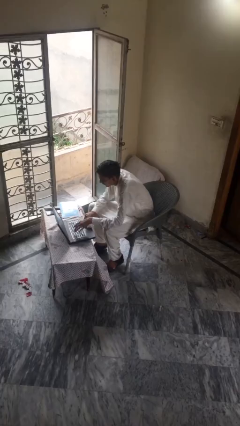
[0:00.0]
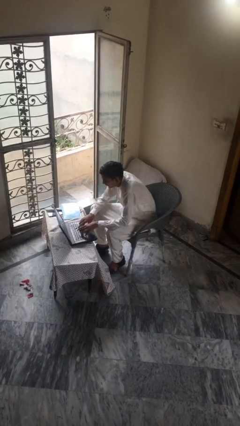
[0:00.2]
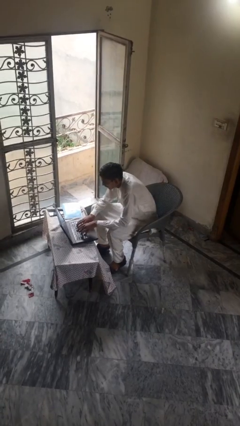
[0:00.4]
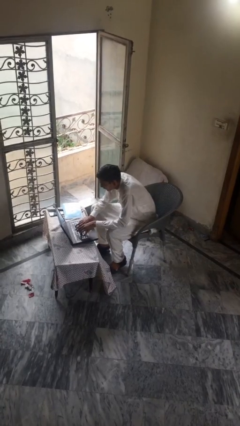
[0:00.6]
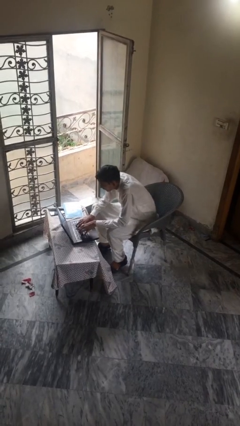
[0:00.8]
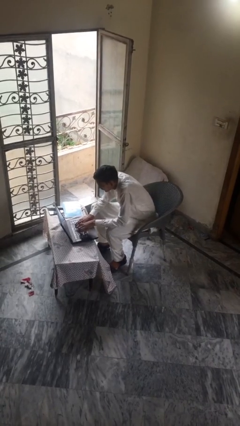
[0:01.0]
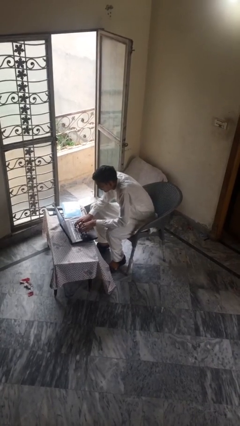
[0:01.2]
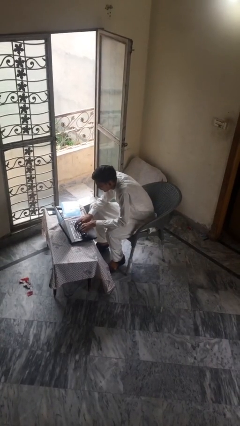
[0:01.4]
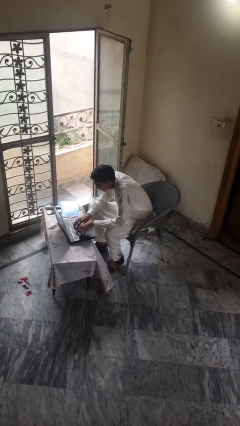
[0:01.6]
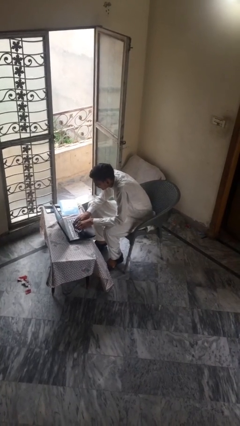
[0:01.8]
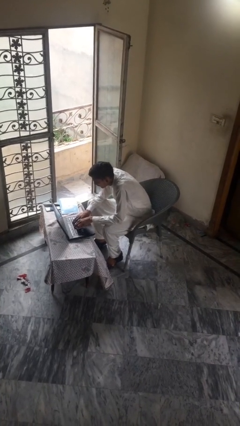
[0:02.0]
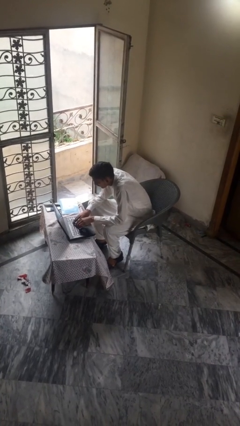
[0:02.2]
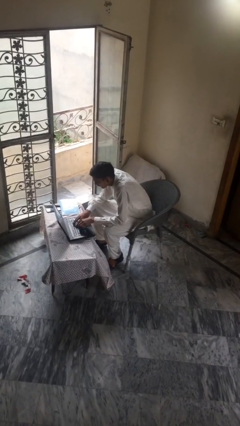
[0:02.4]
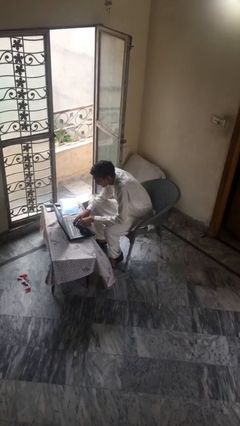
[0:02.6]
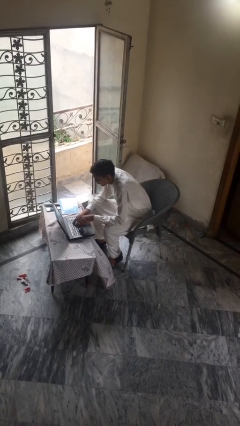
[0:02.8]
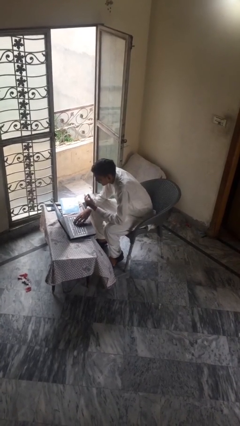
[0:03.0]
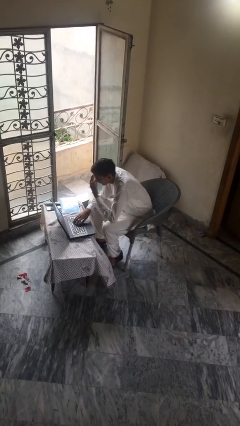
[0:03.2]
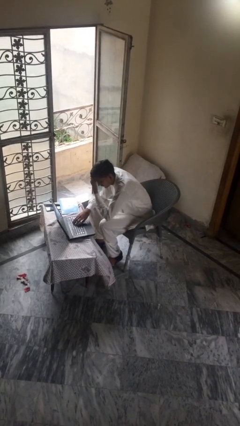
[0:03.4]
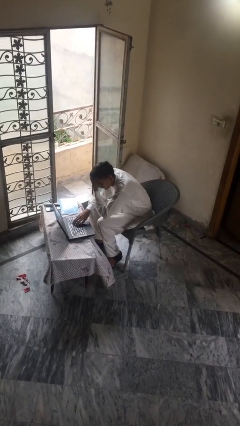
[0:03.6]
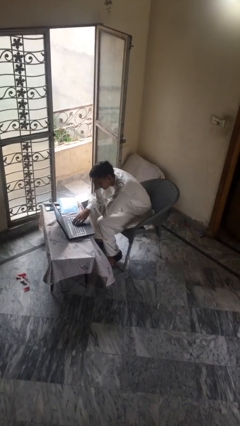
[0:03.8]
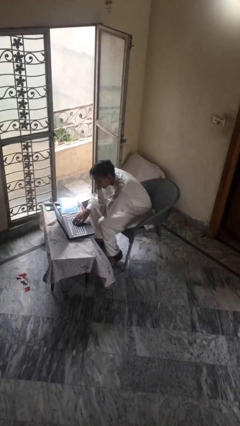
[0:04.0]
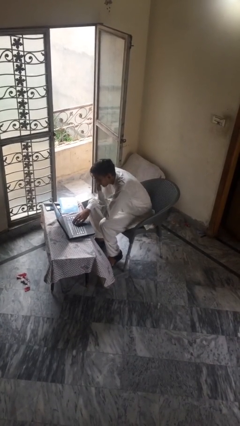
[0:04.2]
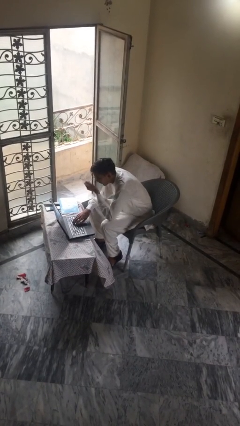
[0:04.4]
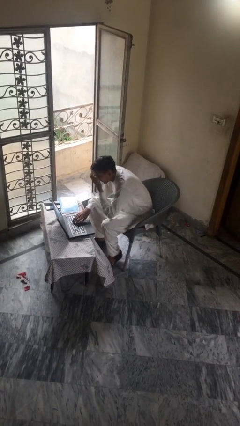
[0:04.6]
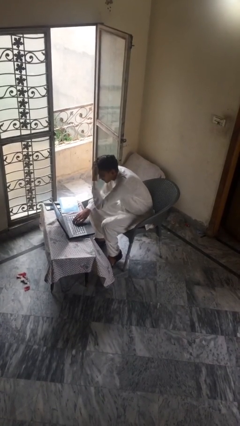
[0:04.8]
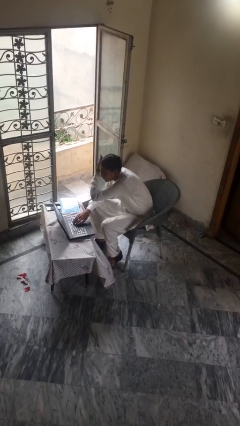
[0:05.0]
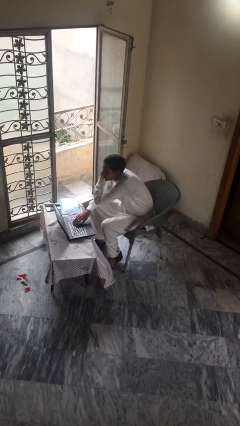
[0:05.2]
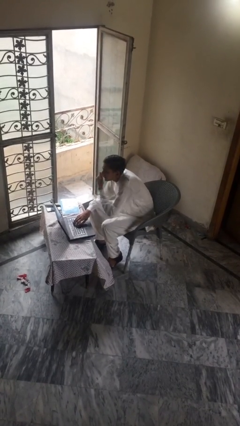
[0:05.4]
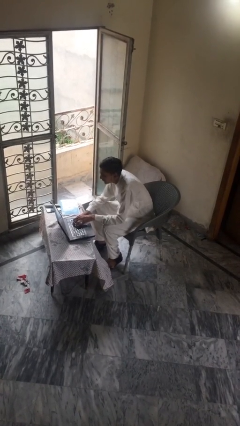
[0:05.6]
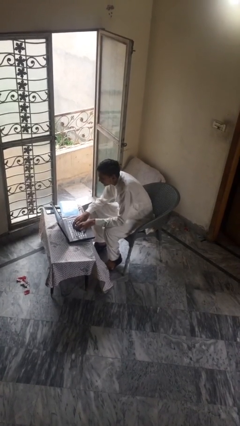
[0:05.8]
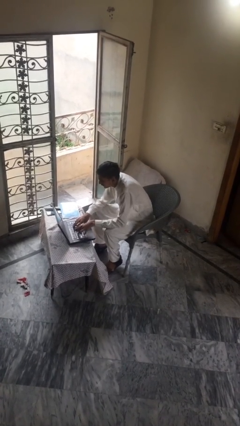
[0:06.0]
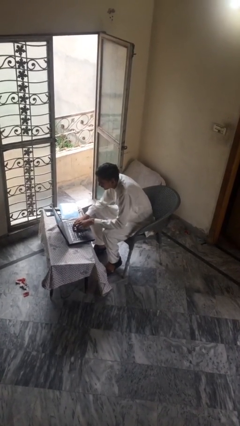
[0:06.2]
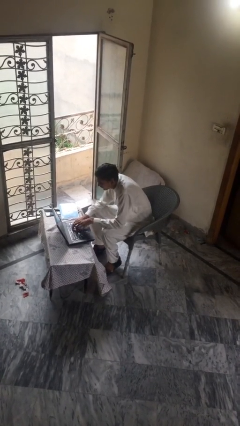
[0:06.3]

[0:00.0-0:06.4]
person interacts with laptop

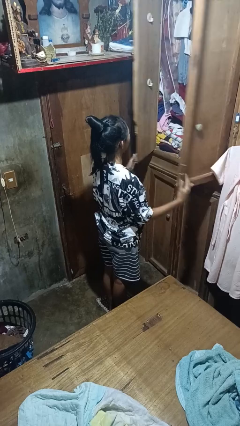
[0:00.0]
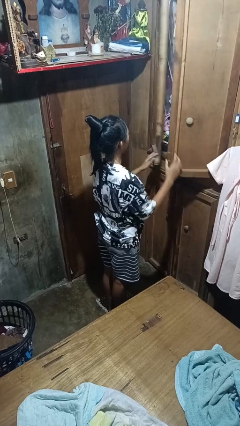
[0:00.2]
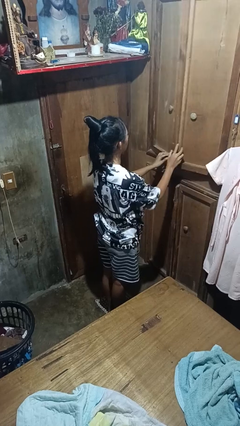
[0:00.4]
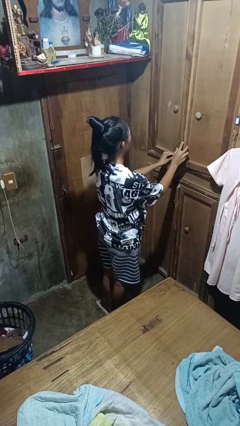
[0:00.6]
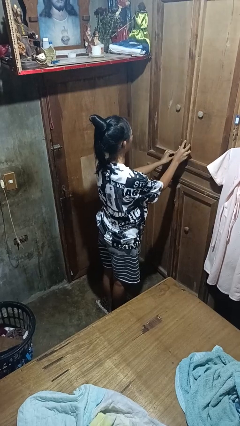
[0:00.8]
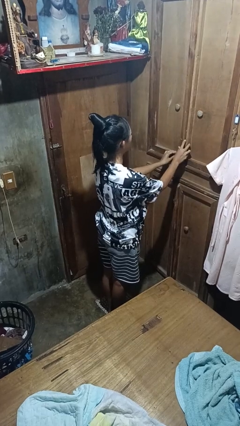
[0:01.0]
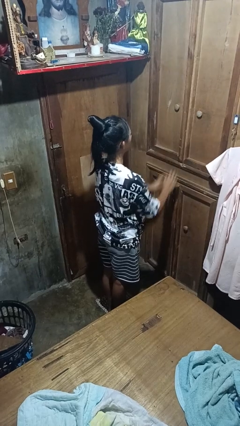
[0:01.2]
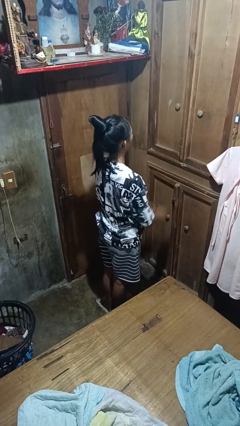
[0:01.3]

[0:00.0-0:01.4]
person closes closet door

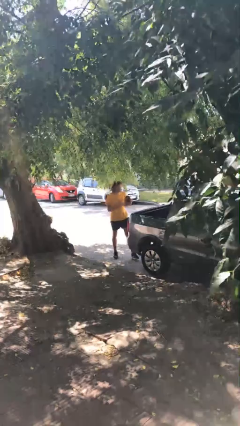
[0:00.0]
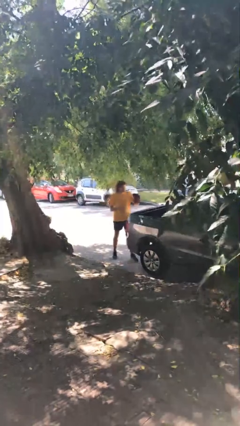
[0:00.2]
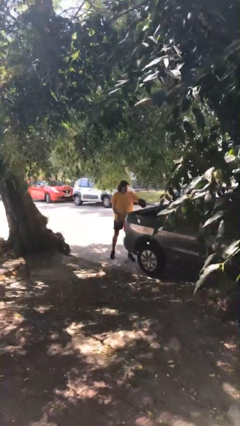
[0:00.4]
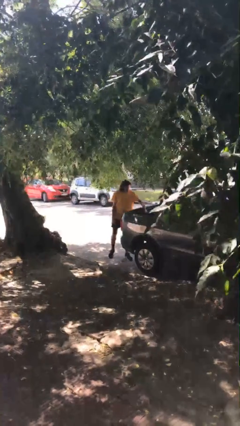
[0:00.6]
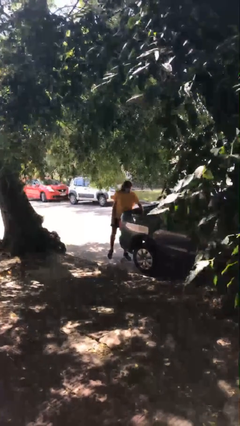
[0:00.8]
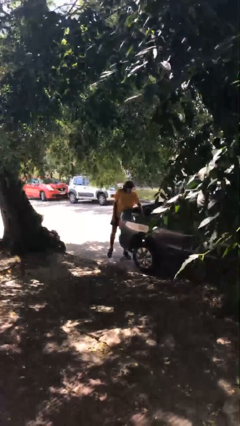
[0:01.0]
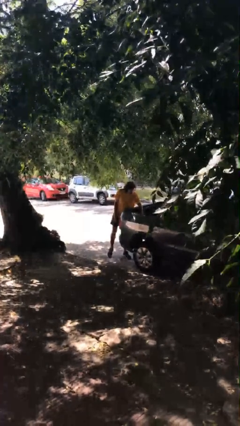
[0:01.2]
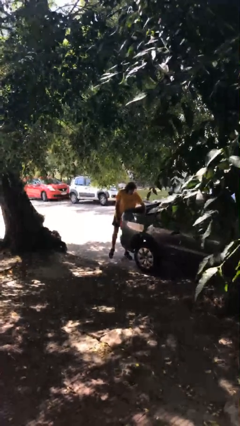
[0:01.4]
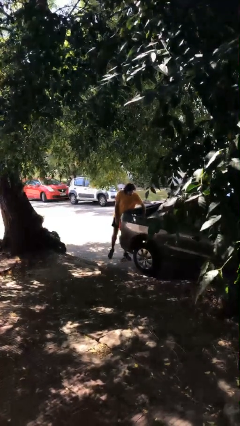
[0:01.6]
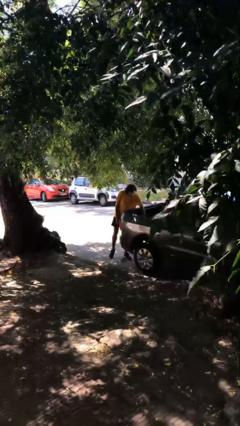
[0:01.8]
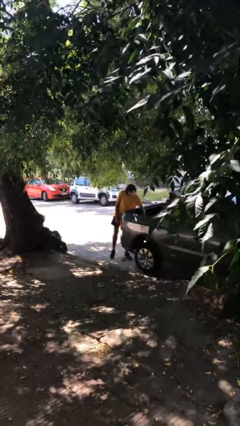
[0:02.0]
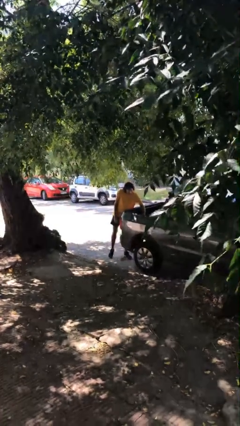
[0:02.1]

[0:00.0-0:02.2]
person loads car

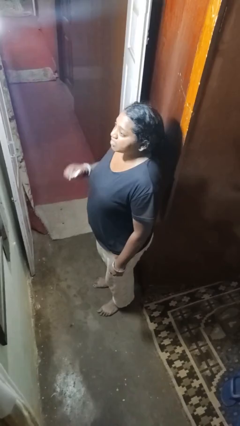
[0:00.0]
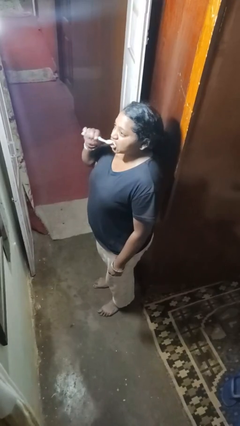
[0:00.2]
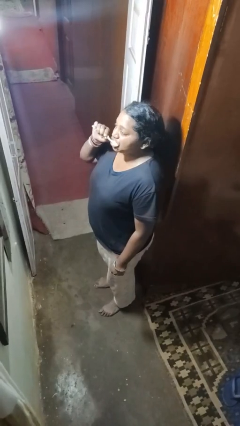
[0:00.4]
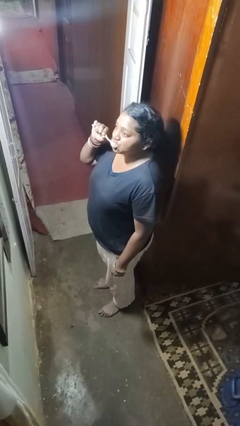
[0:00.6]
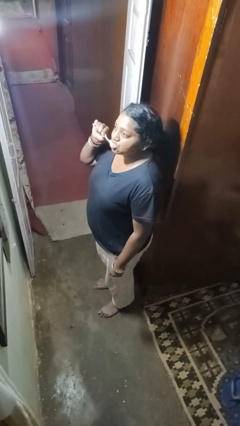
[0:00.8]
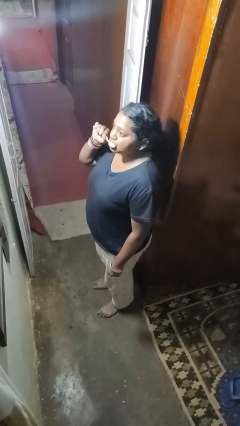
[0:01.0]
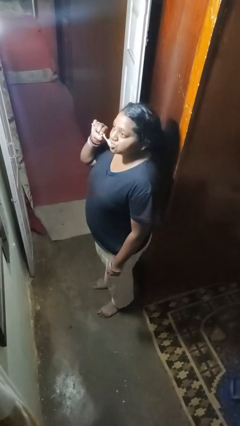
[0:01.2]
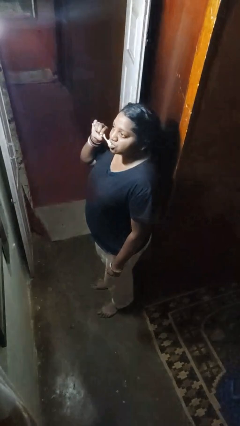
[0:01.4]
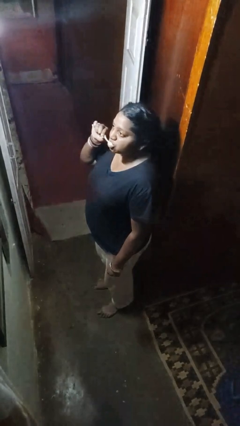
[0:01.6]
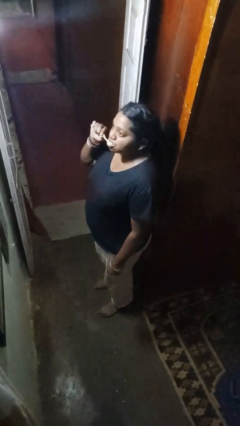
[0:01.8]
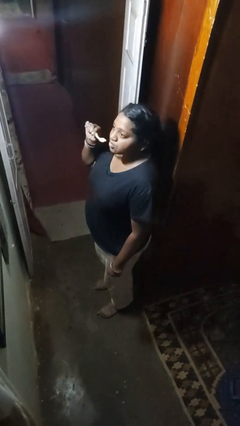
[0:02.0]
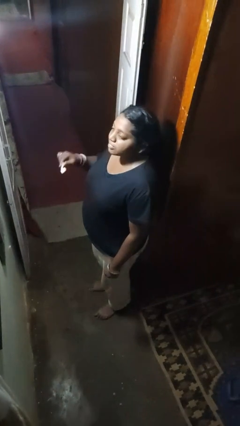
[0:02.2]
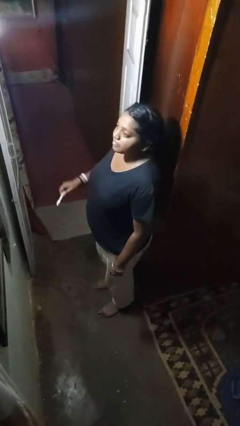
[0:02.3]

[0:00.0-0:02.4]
person brushes teeth

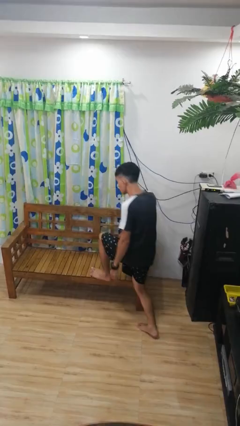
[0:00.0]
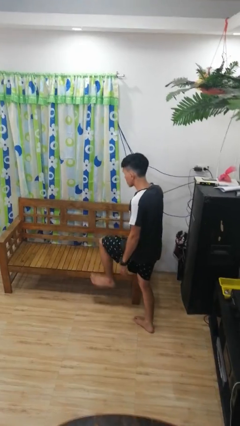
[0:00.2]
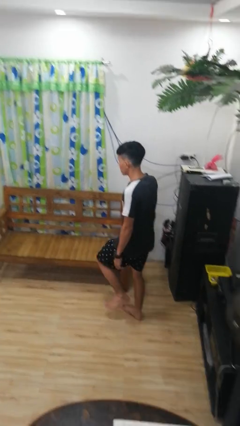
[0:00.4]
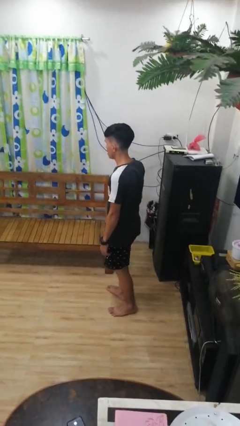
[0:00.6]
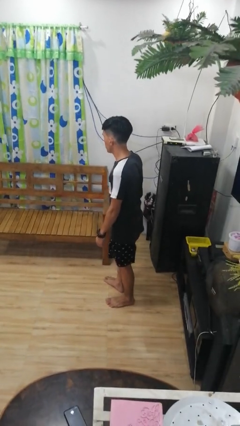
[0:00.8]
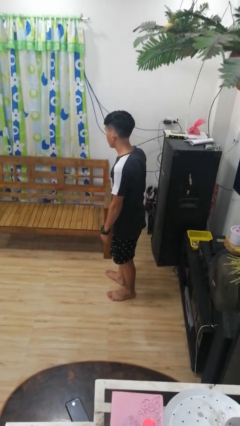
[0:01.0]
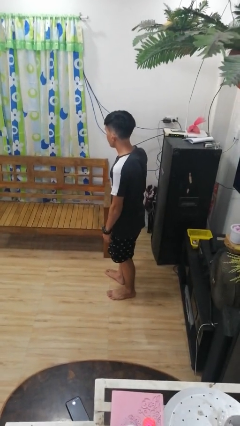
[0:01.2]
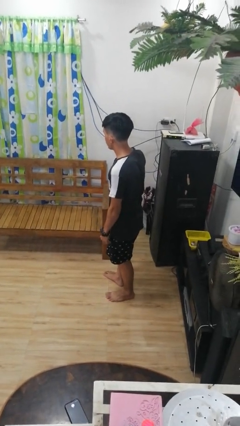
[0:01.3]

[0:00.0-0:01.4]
person climbs off couch

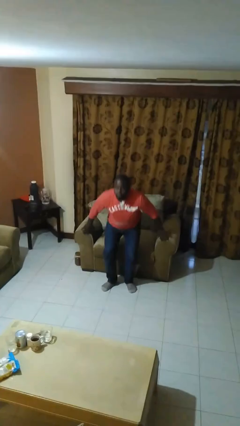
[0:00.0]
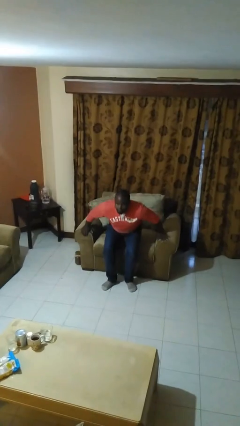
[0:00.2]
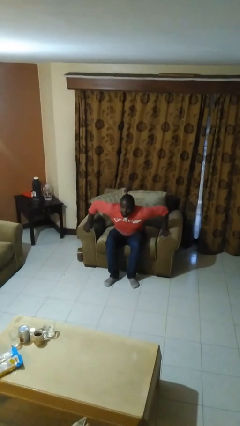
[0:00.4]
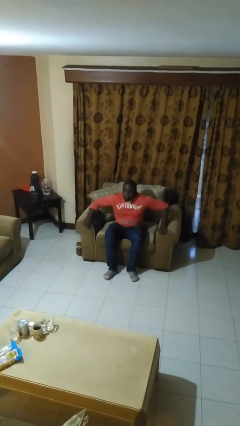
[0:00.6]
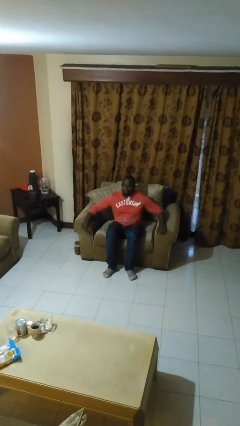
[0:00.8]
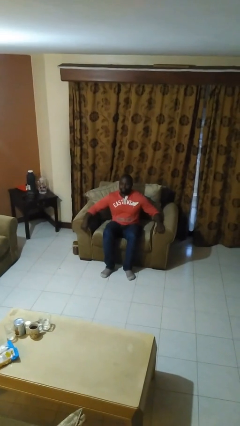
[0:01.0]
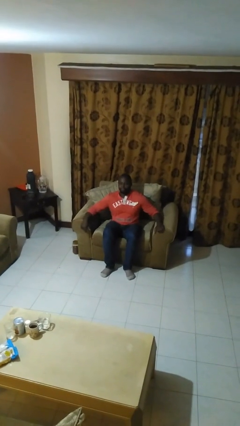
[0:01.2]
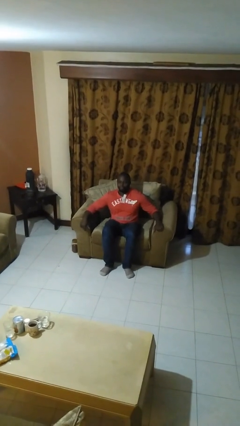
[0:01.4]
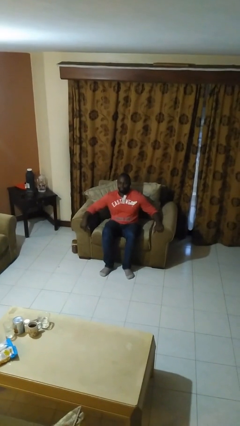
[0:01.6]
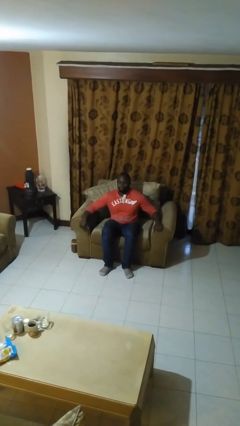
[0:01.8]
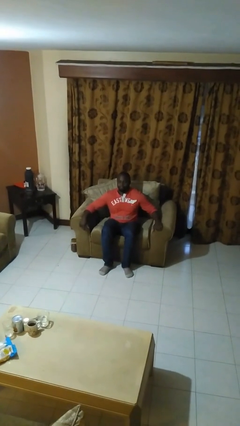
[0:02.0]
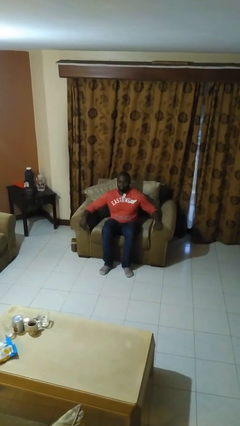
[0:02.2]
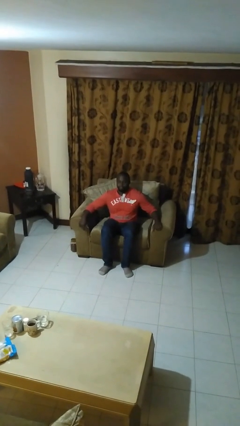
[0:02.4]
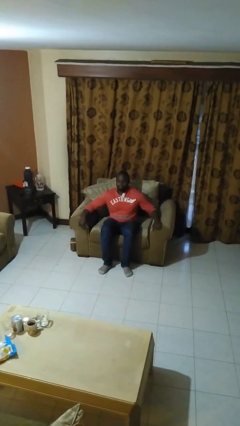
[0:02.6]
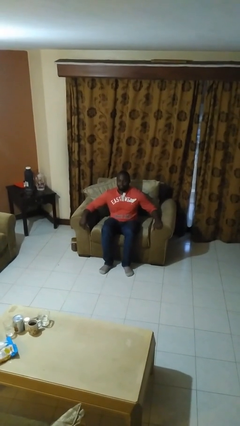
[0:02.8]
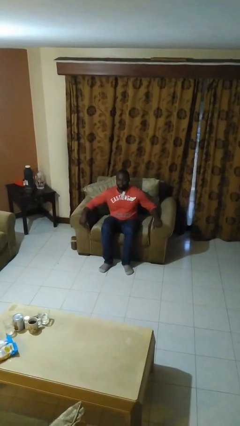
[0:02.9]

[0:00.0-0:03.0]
person sits down

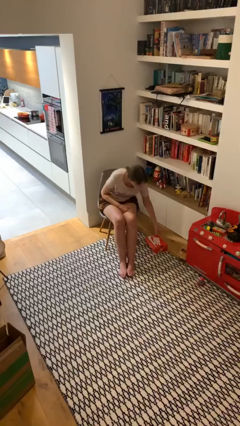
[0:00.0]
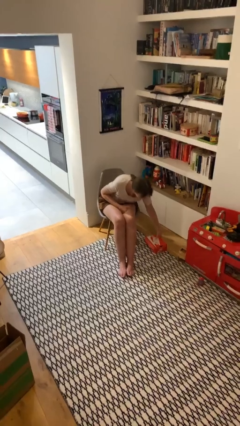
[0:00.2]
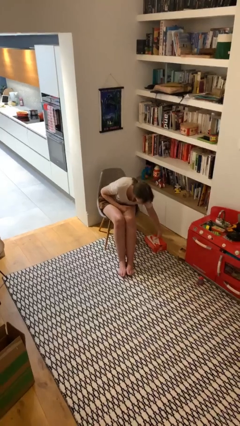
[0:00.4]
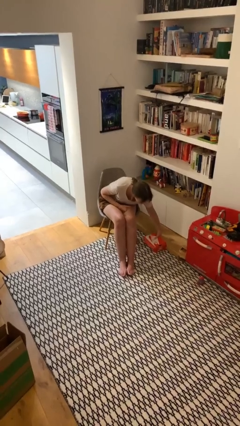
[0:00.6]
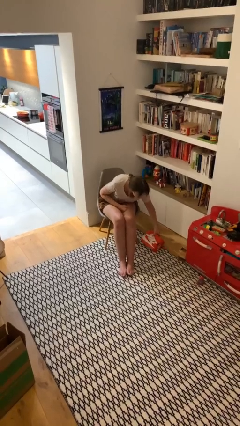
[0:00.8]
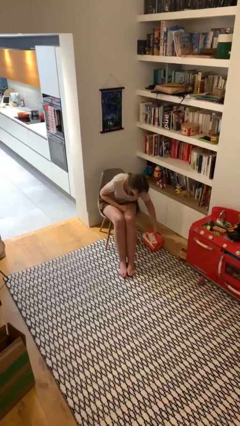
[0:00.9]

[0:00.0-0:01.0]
person picks up object from floor
